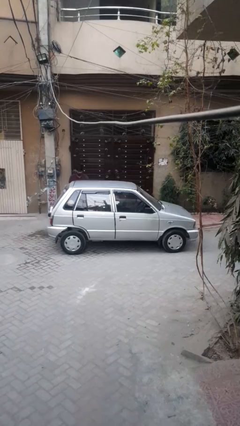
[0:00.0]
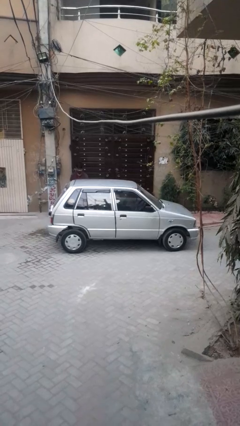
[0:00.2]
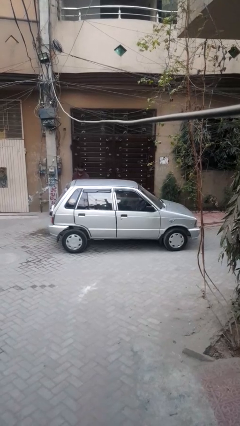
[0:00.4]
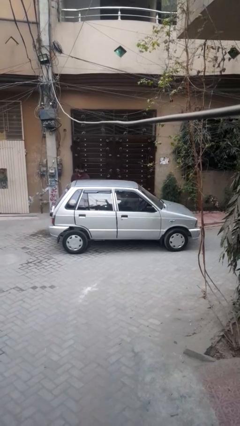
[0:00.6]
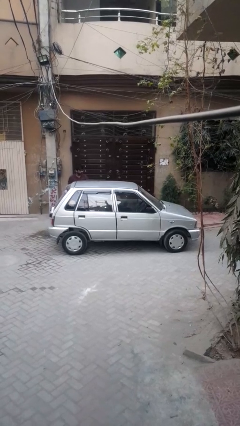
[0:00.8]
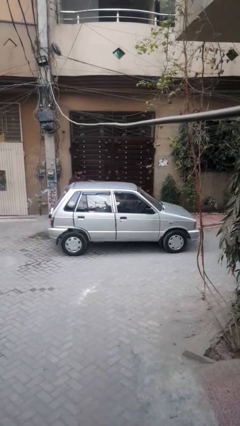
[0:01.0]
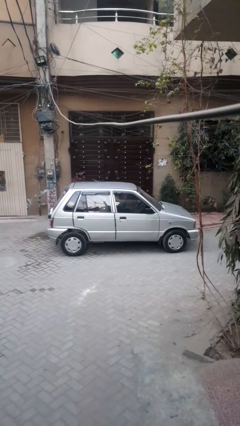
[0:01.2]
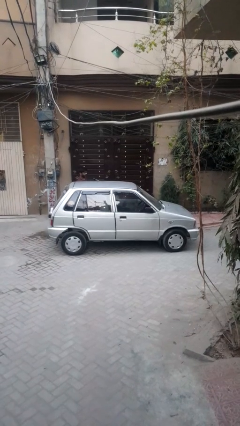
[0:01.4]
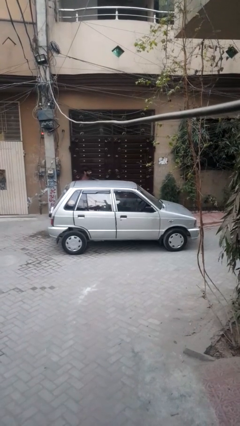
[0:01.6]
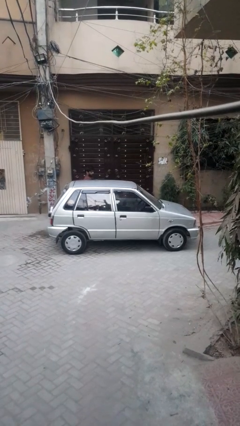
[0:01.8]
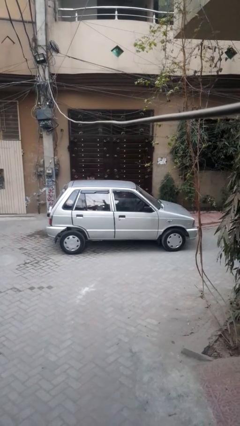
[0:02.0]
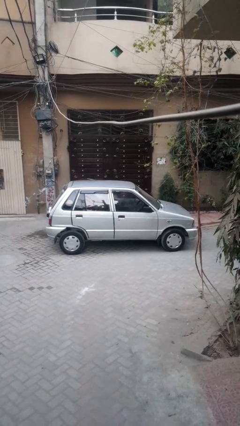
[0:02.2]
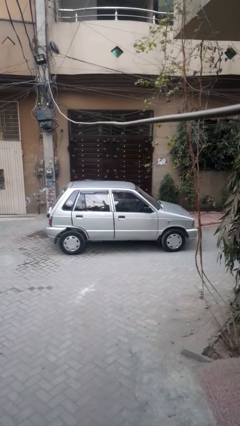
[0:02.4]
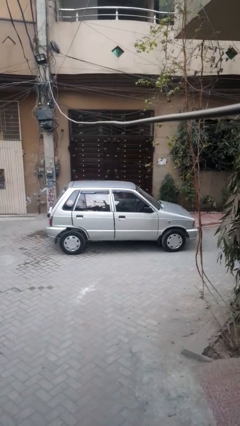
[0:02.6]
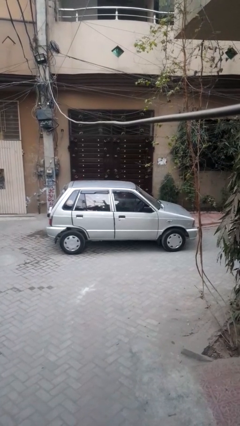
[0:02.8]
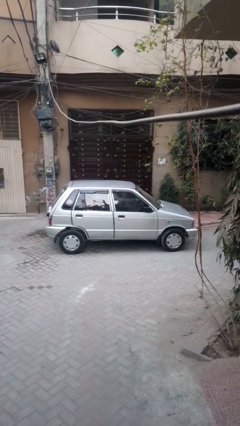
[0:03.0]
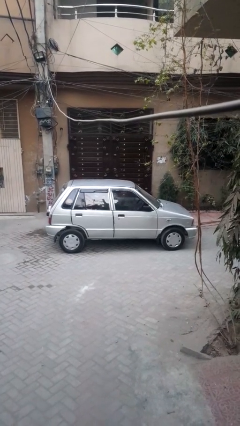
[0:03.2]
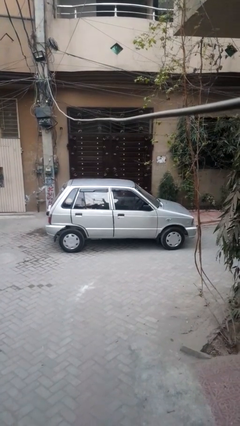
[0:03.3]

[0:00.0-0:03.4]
car picks up person

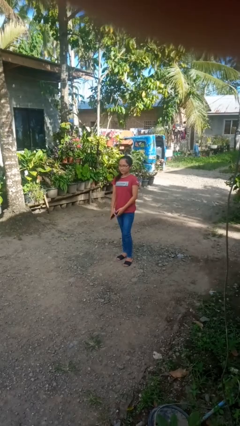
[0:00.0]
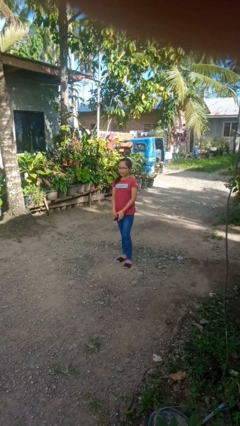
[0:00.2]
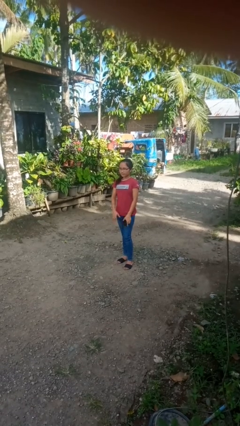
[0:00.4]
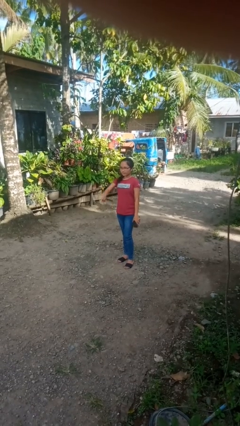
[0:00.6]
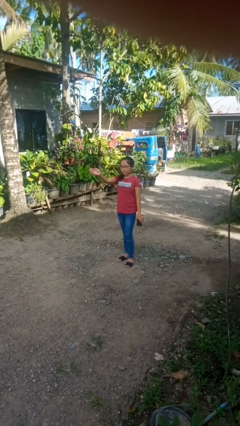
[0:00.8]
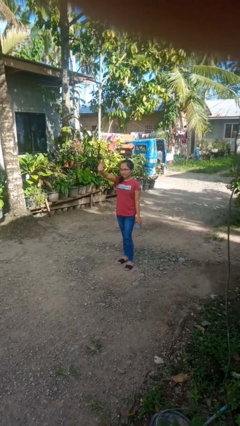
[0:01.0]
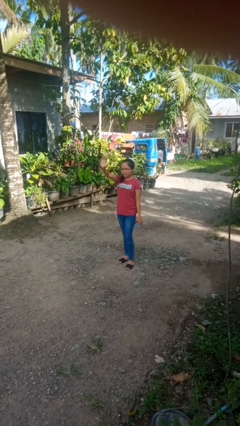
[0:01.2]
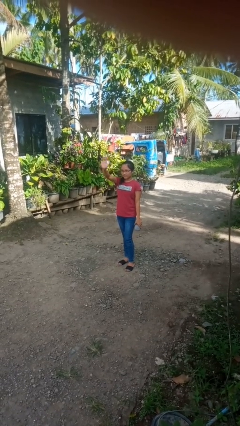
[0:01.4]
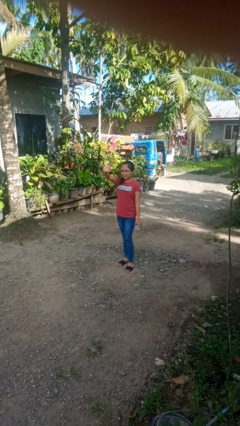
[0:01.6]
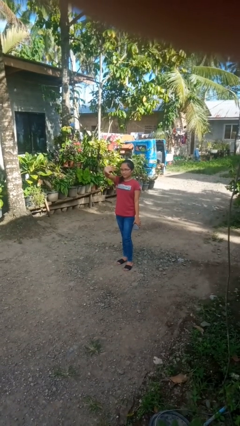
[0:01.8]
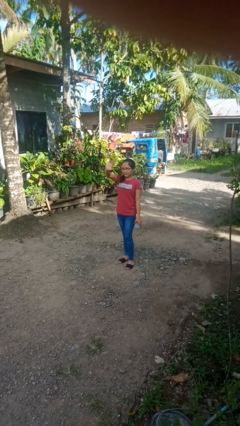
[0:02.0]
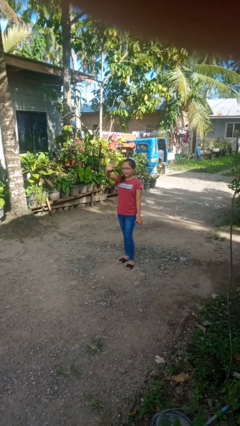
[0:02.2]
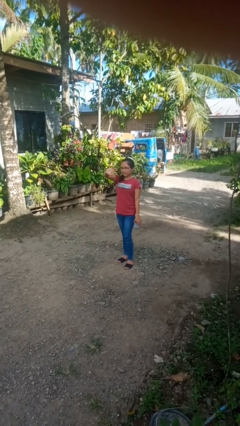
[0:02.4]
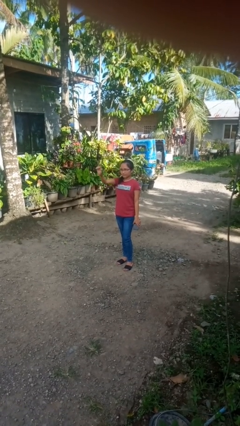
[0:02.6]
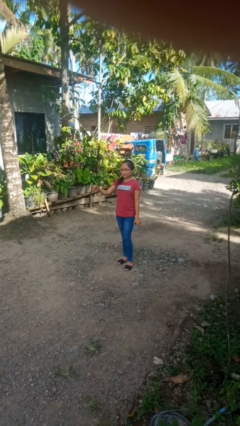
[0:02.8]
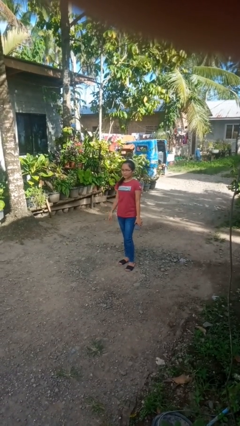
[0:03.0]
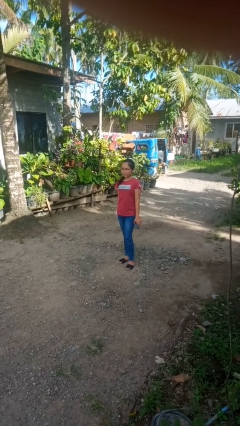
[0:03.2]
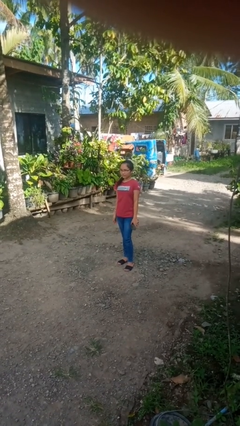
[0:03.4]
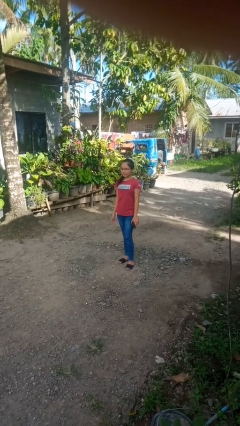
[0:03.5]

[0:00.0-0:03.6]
person waves at person

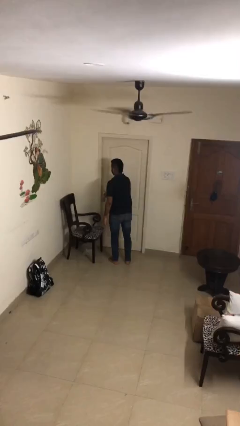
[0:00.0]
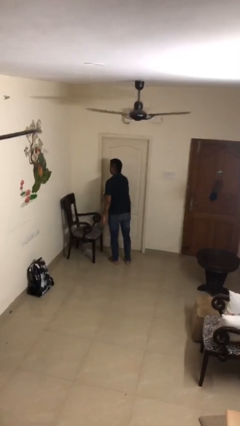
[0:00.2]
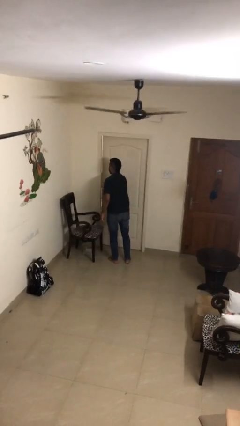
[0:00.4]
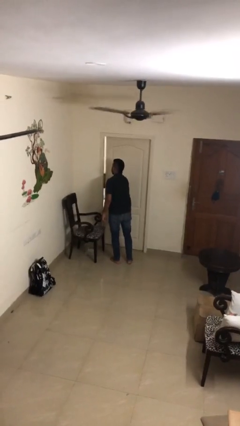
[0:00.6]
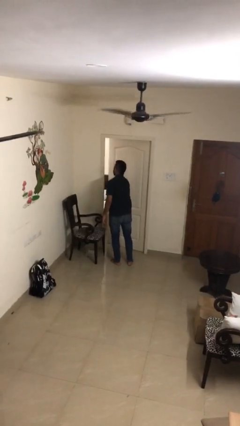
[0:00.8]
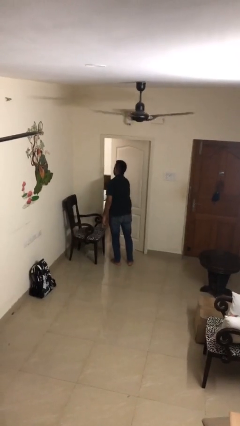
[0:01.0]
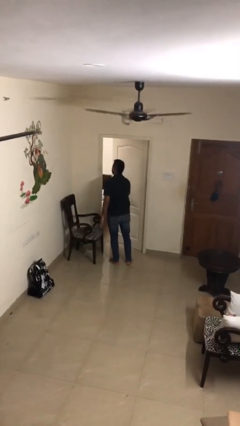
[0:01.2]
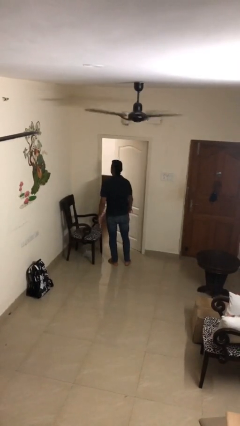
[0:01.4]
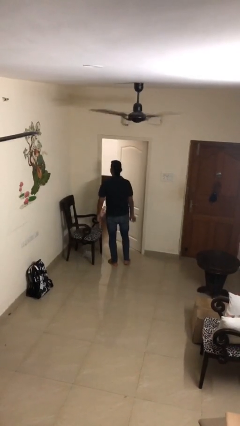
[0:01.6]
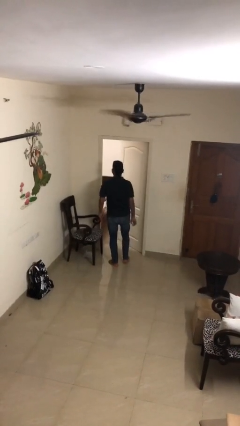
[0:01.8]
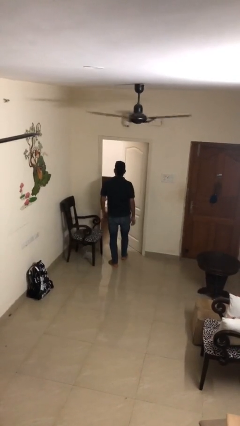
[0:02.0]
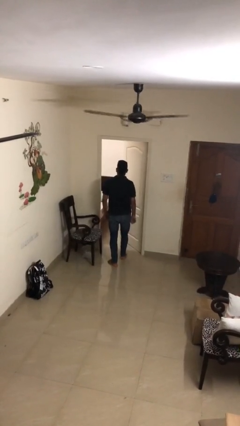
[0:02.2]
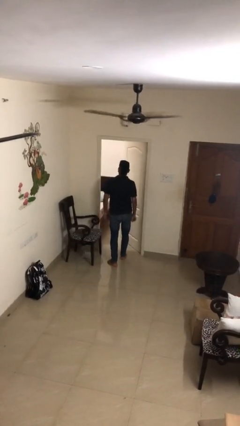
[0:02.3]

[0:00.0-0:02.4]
person opens facility door

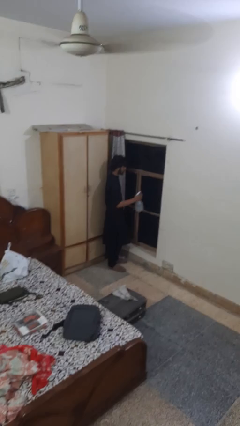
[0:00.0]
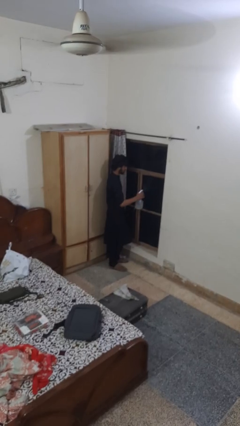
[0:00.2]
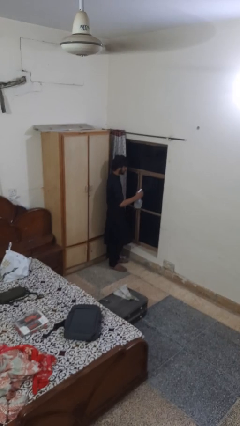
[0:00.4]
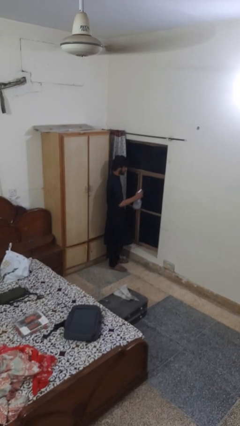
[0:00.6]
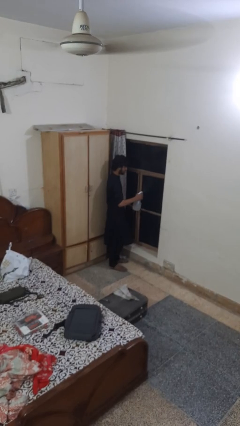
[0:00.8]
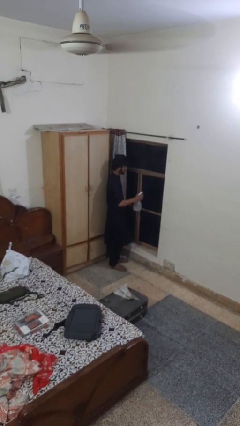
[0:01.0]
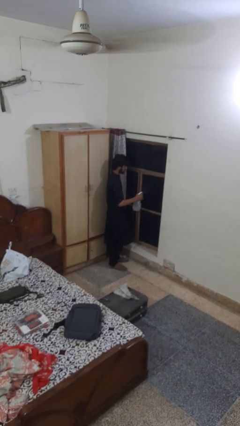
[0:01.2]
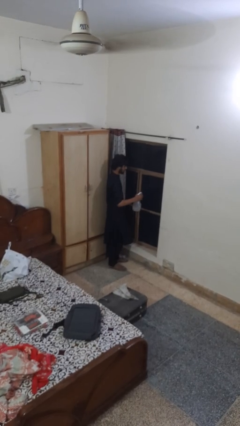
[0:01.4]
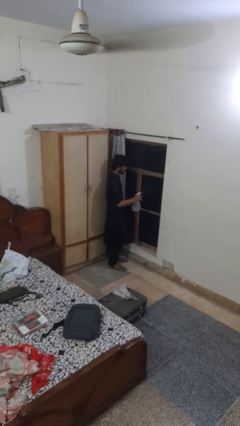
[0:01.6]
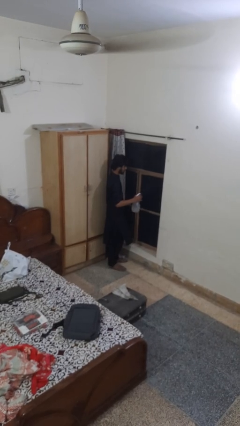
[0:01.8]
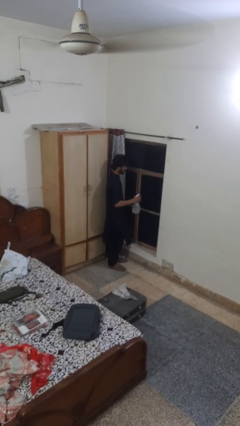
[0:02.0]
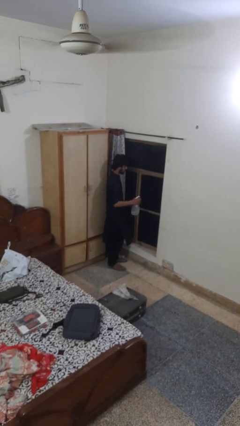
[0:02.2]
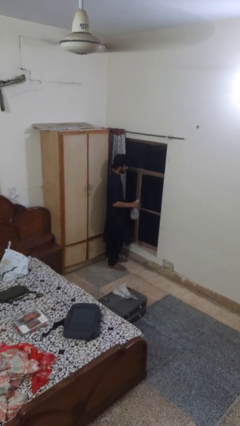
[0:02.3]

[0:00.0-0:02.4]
person sprays from bottle

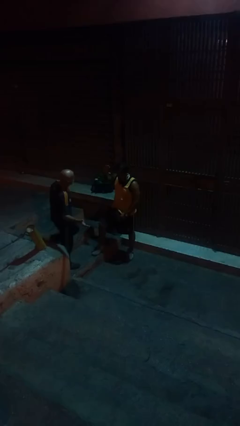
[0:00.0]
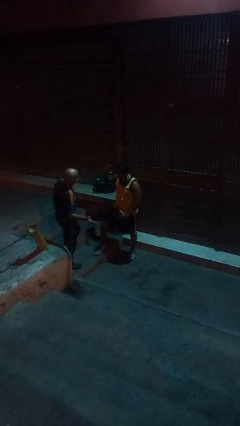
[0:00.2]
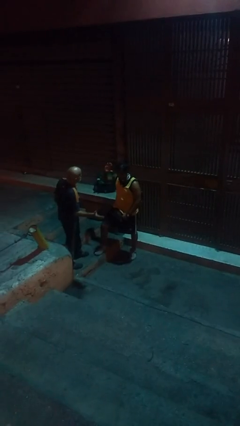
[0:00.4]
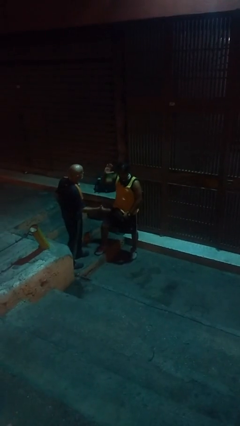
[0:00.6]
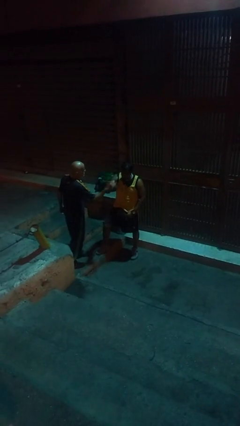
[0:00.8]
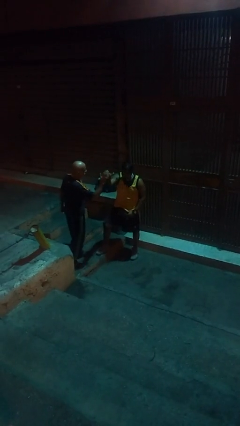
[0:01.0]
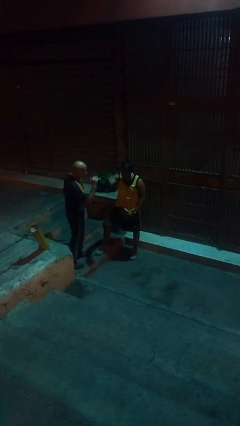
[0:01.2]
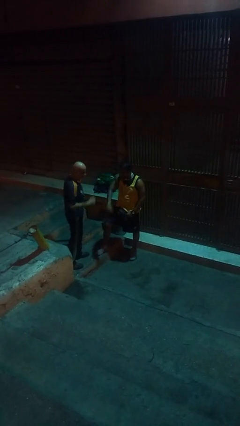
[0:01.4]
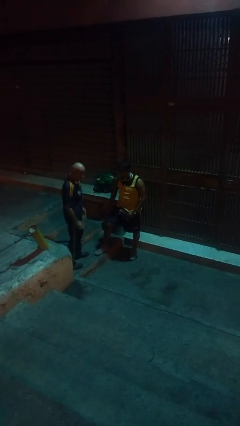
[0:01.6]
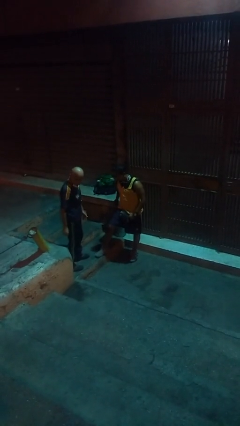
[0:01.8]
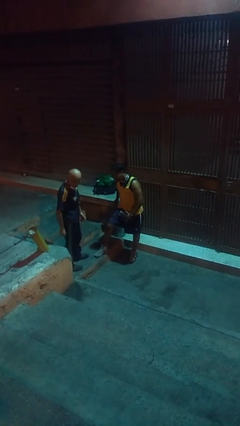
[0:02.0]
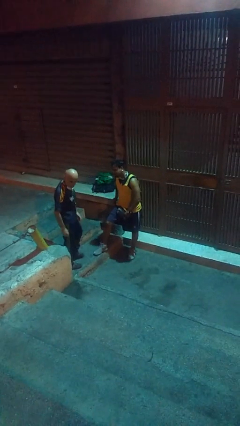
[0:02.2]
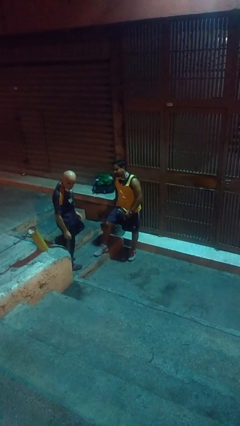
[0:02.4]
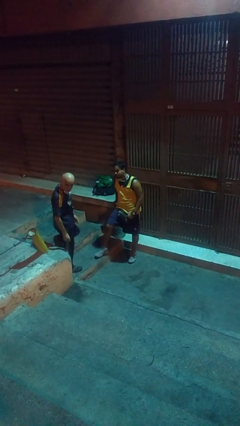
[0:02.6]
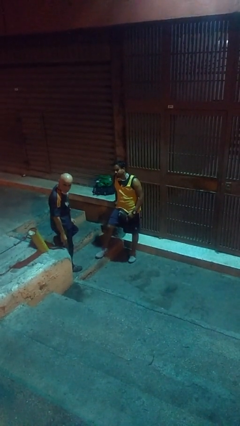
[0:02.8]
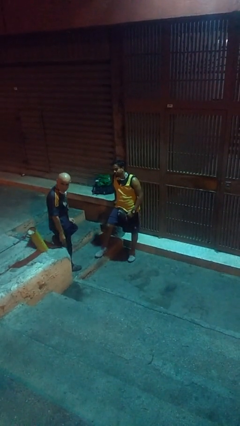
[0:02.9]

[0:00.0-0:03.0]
person highfives hand

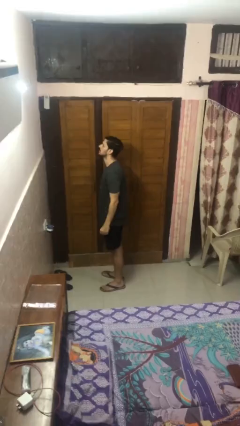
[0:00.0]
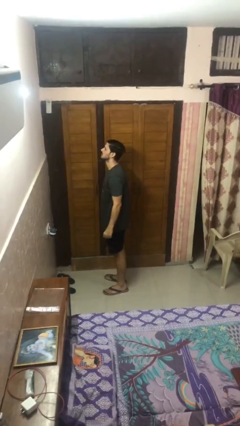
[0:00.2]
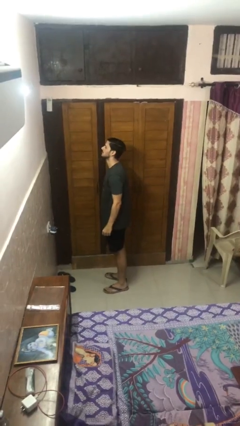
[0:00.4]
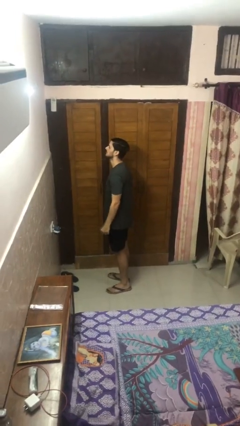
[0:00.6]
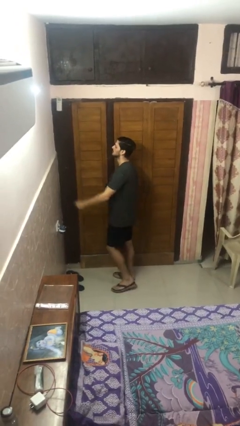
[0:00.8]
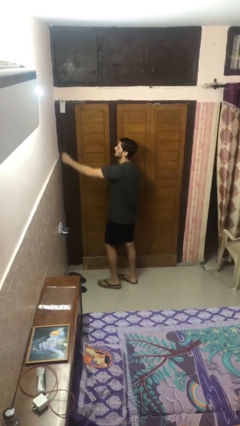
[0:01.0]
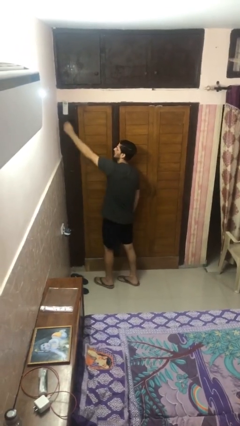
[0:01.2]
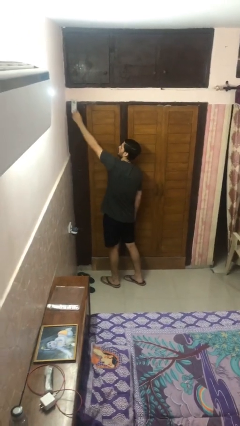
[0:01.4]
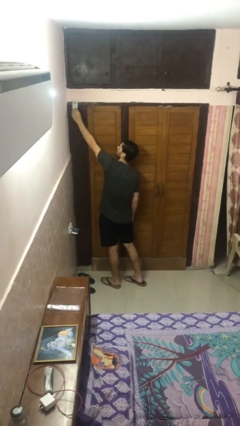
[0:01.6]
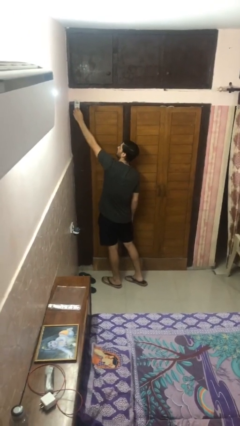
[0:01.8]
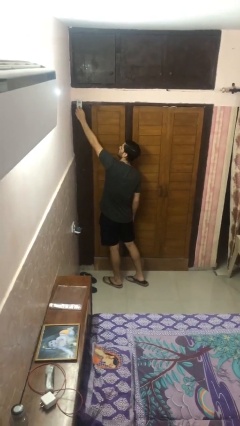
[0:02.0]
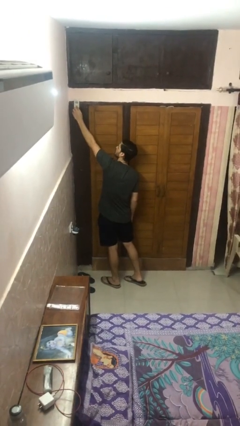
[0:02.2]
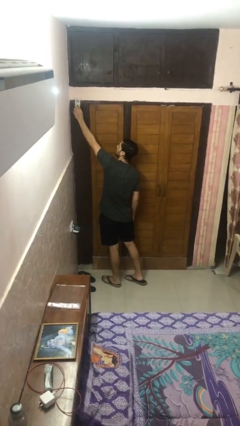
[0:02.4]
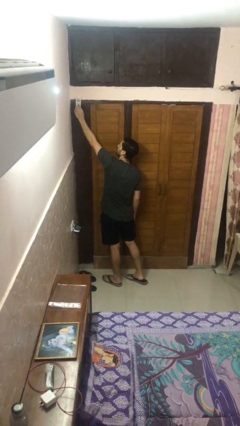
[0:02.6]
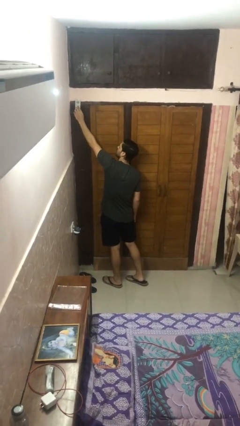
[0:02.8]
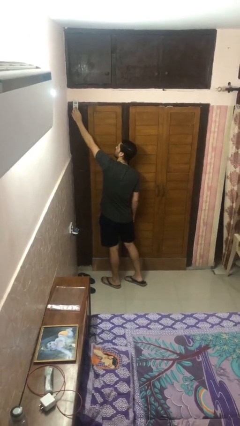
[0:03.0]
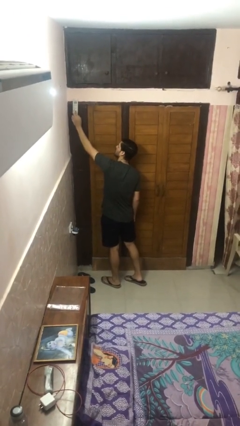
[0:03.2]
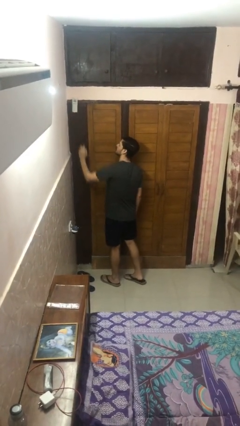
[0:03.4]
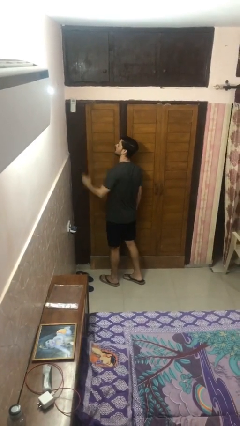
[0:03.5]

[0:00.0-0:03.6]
person adjusts thermostat
